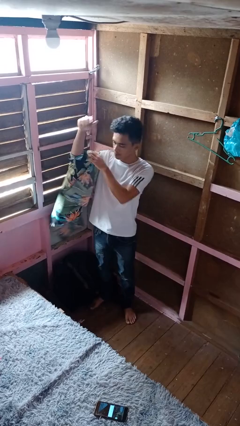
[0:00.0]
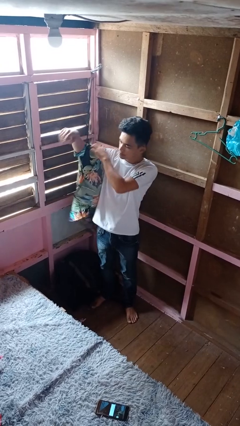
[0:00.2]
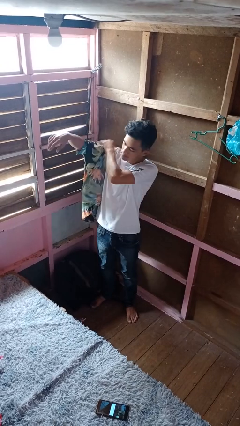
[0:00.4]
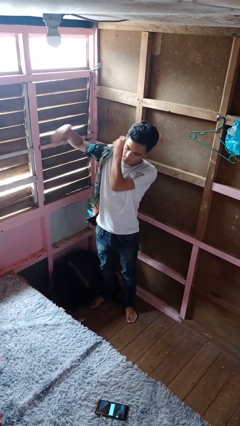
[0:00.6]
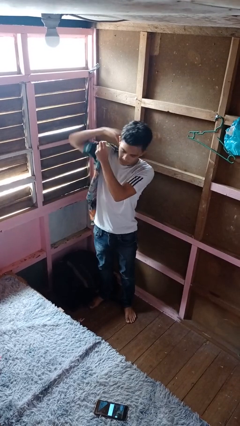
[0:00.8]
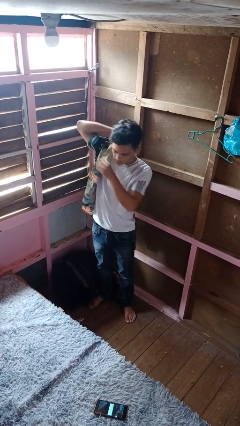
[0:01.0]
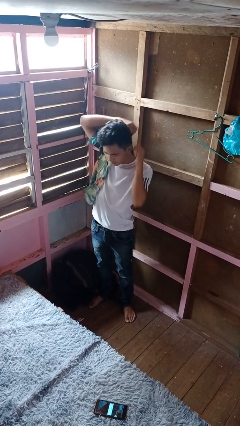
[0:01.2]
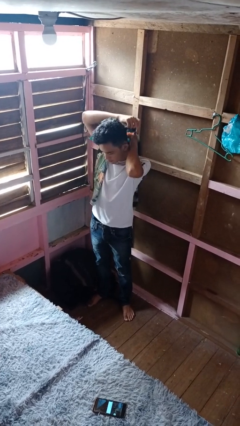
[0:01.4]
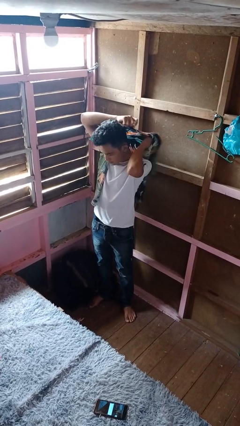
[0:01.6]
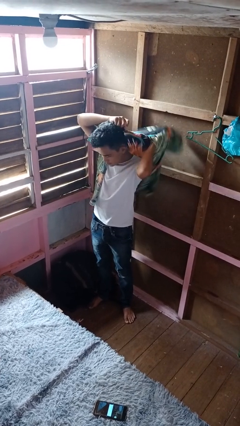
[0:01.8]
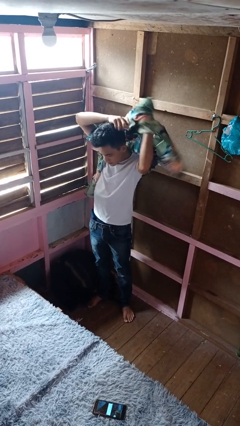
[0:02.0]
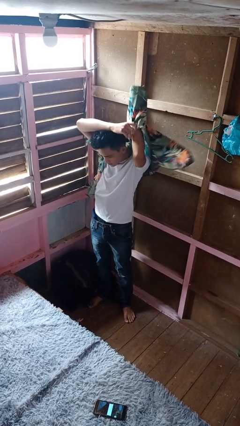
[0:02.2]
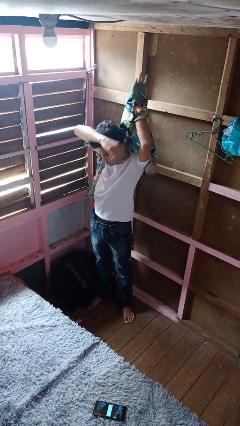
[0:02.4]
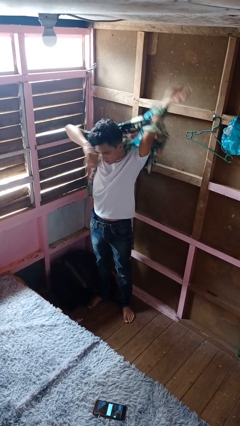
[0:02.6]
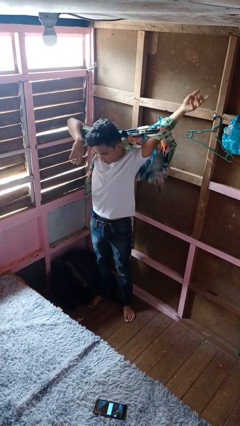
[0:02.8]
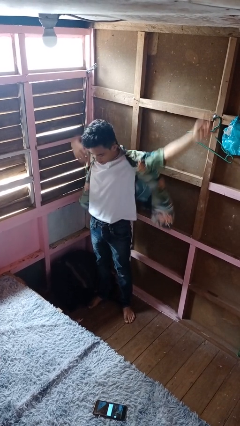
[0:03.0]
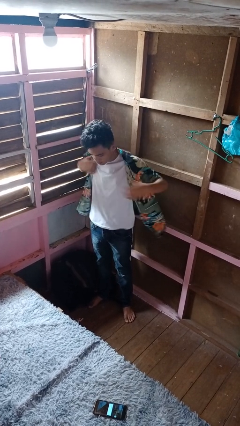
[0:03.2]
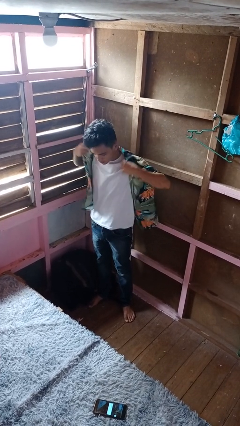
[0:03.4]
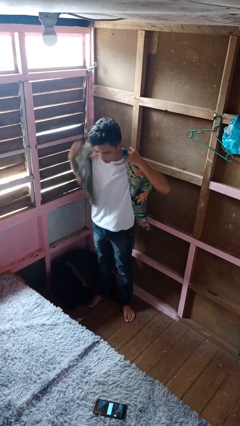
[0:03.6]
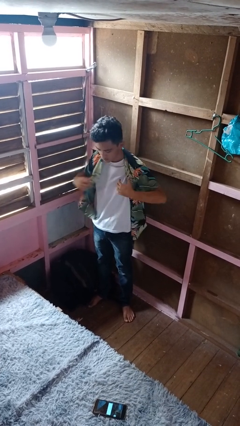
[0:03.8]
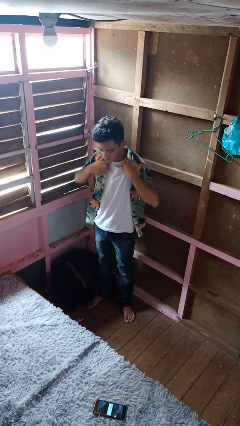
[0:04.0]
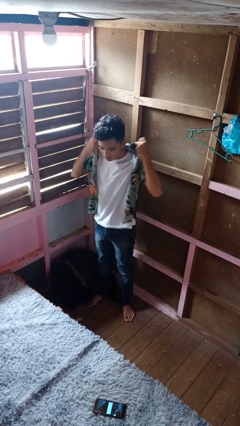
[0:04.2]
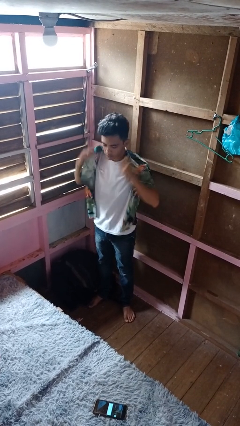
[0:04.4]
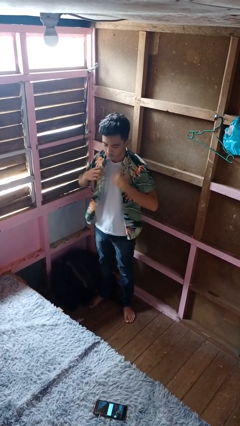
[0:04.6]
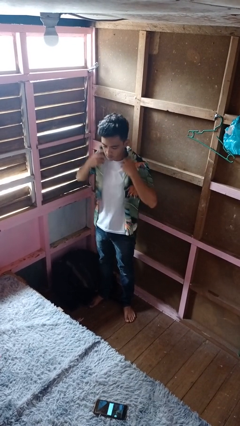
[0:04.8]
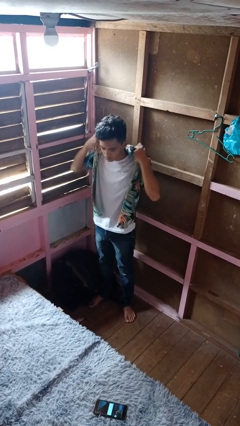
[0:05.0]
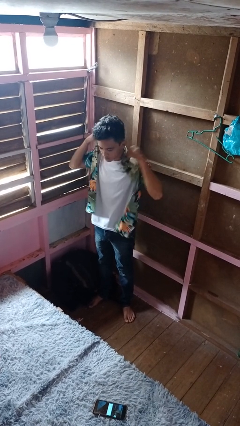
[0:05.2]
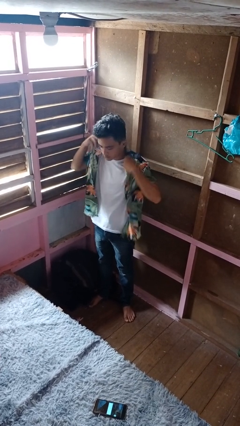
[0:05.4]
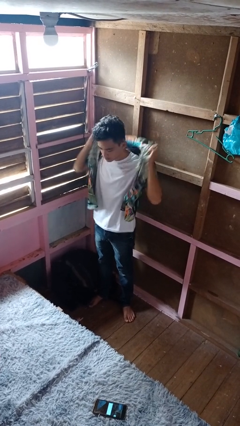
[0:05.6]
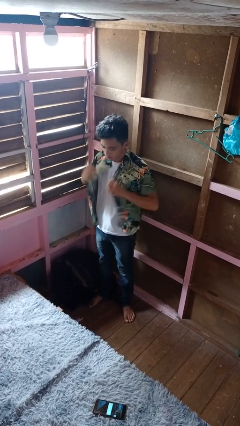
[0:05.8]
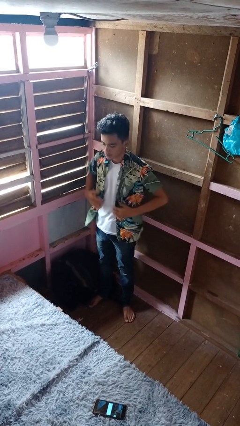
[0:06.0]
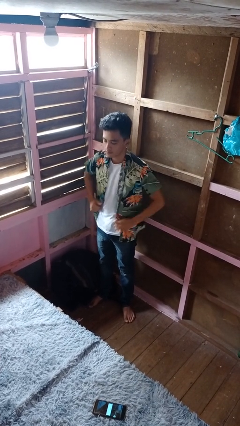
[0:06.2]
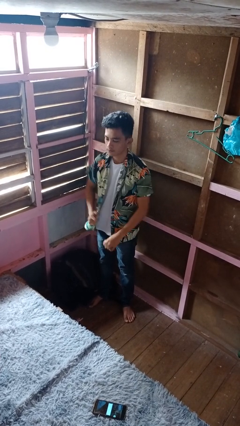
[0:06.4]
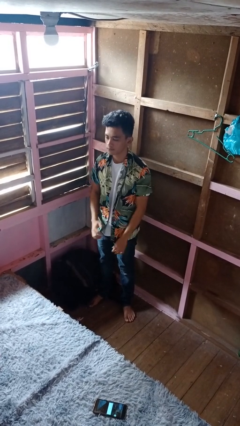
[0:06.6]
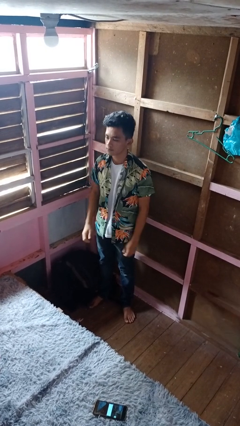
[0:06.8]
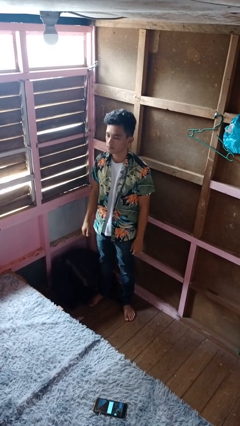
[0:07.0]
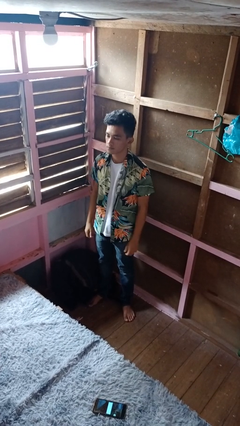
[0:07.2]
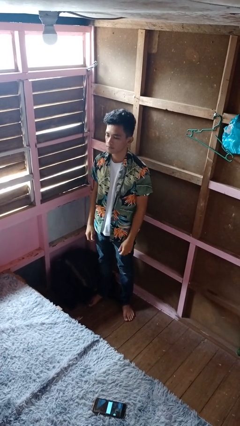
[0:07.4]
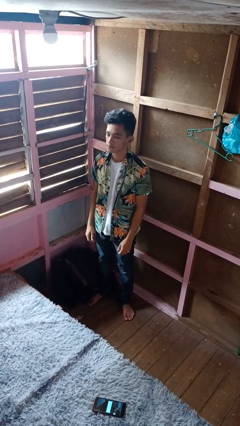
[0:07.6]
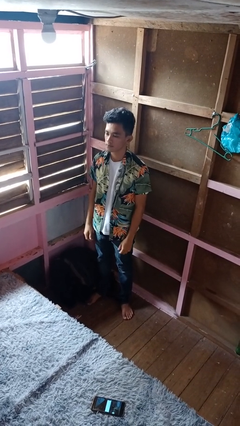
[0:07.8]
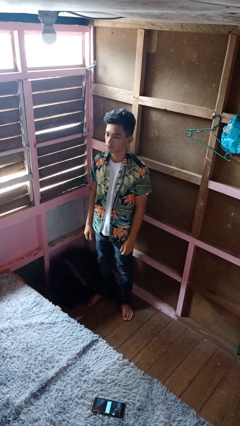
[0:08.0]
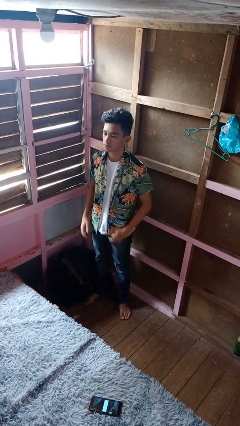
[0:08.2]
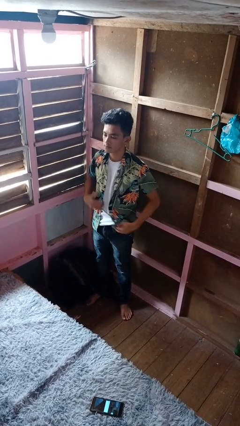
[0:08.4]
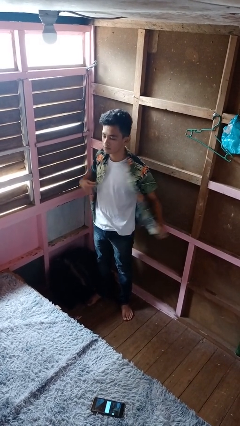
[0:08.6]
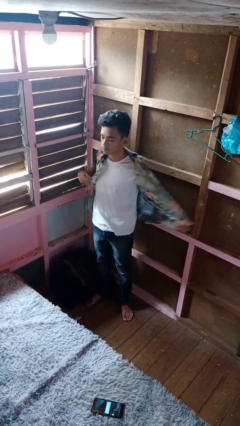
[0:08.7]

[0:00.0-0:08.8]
person puts on shirt

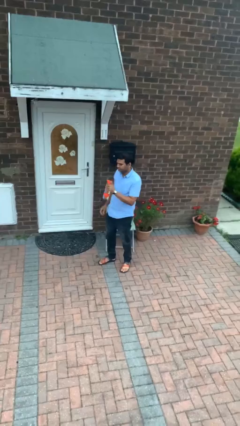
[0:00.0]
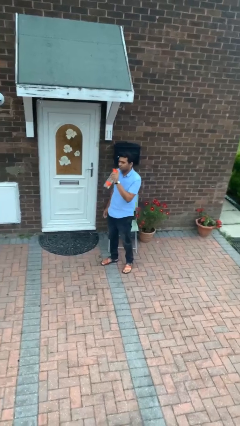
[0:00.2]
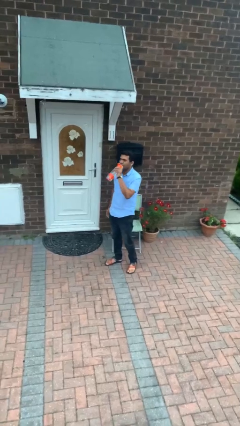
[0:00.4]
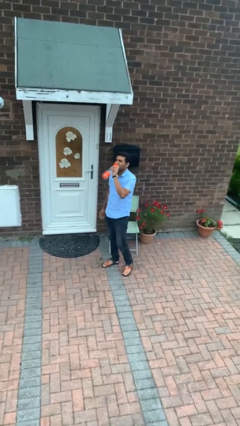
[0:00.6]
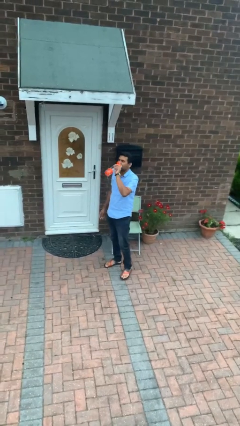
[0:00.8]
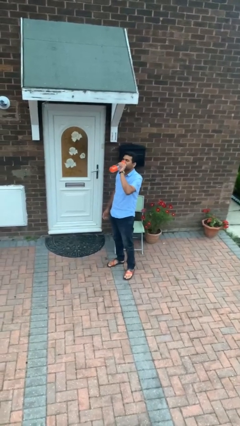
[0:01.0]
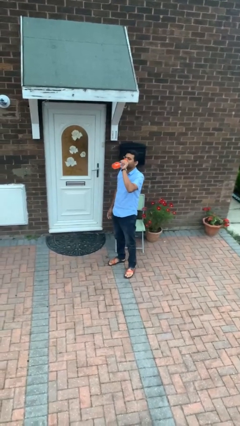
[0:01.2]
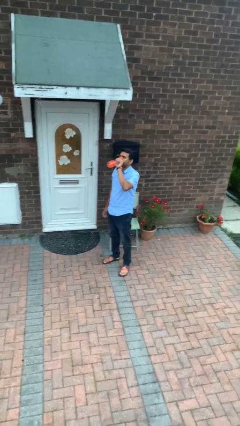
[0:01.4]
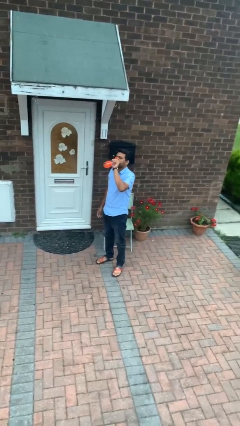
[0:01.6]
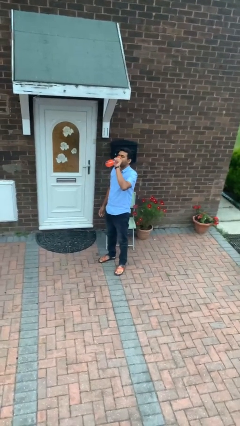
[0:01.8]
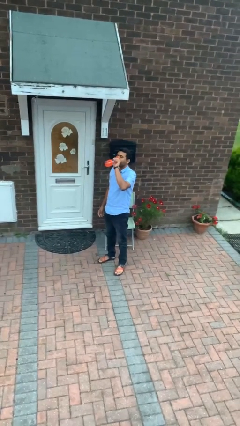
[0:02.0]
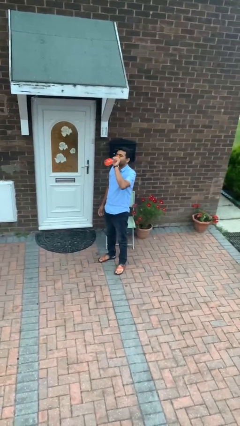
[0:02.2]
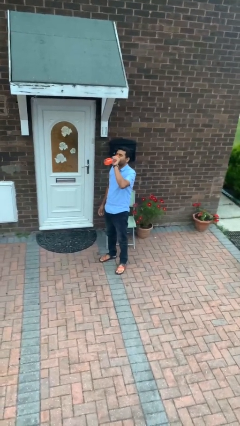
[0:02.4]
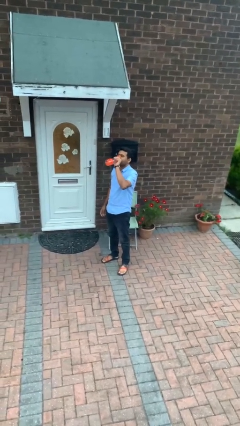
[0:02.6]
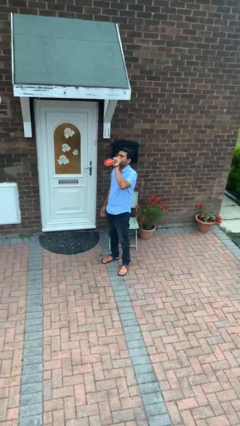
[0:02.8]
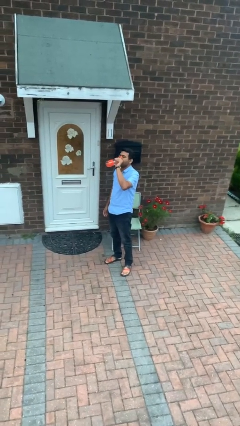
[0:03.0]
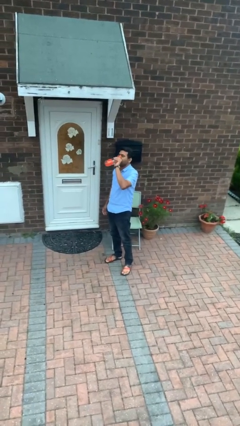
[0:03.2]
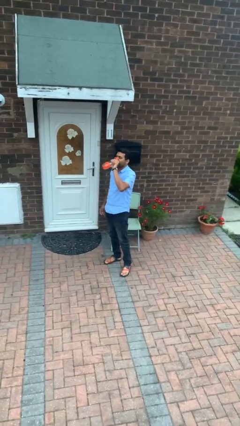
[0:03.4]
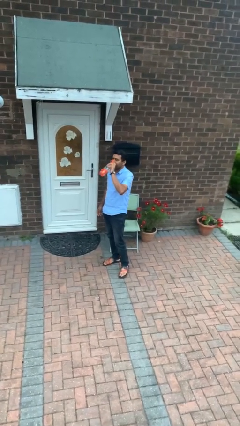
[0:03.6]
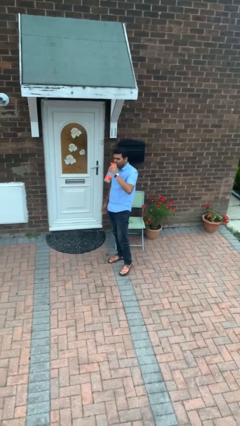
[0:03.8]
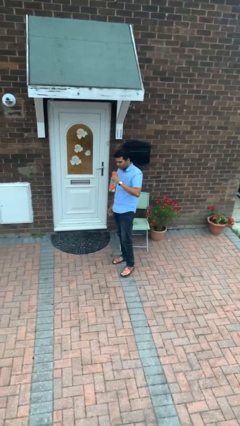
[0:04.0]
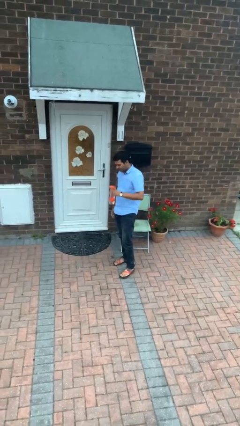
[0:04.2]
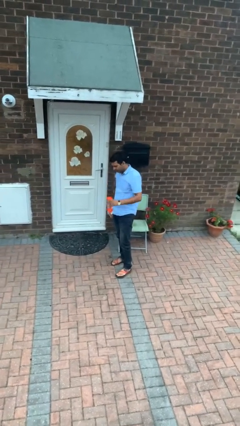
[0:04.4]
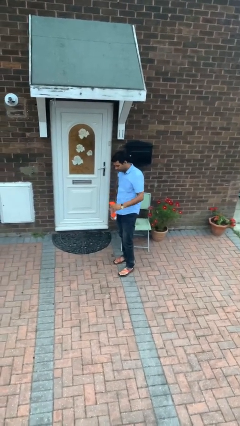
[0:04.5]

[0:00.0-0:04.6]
person drinks from bottle

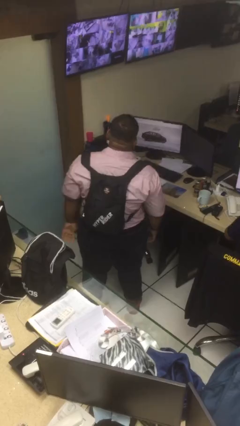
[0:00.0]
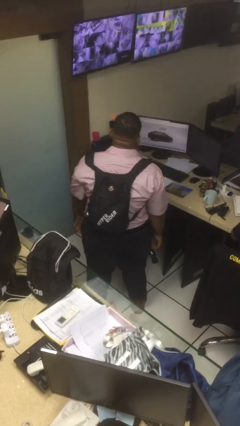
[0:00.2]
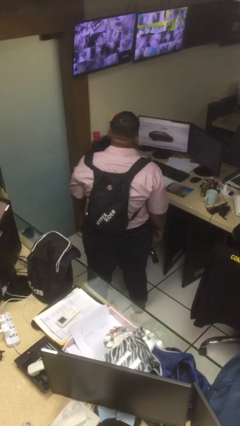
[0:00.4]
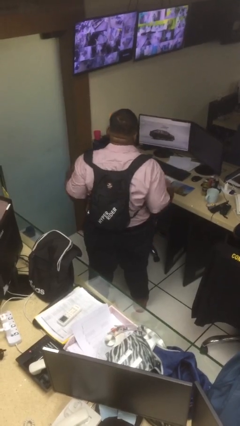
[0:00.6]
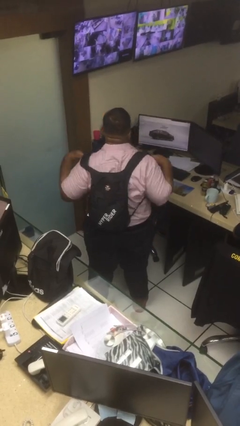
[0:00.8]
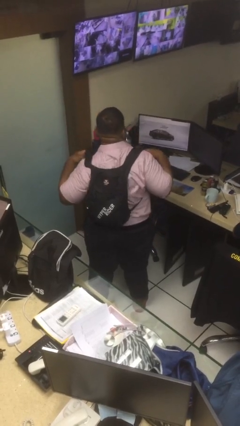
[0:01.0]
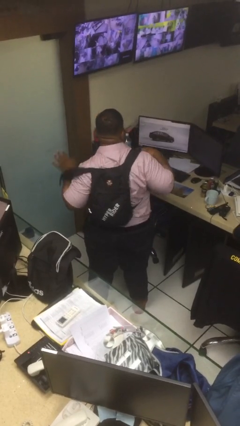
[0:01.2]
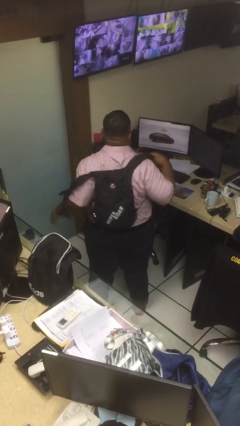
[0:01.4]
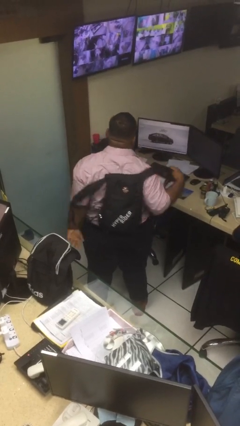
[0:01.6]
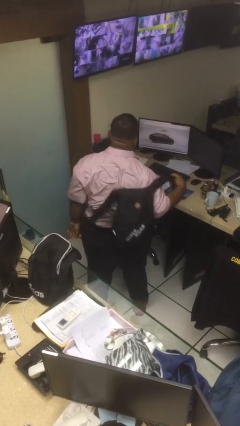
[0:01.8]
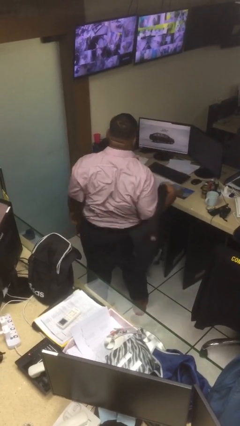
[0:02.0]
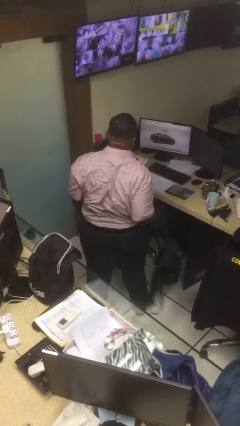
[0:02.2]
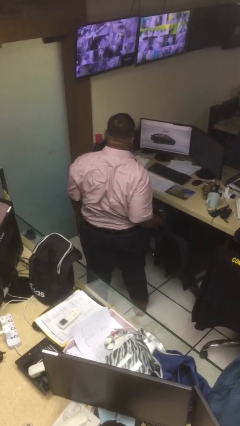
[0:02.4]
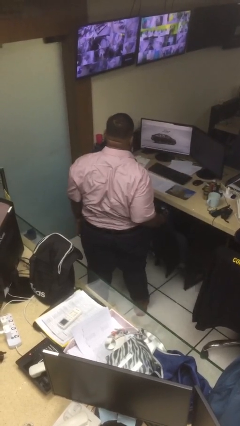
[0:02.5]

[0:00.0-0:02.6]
person takes off backpack

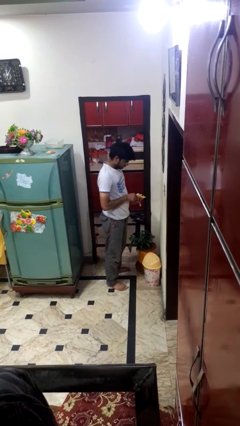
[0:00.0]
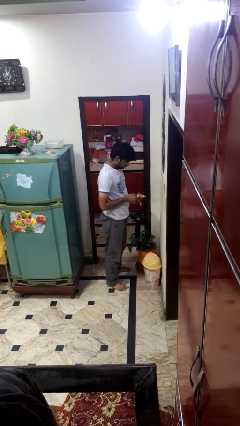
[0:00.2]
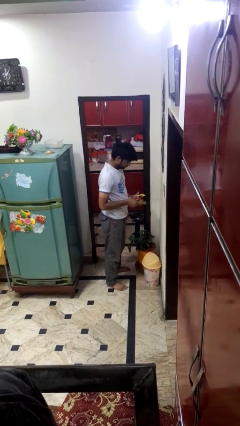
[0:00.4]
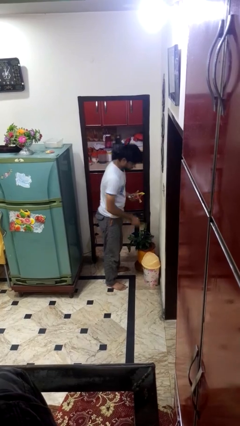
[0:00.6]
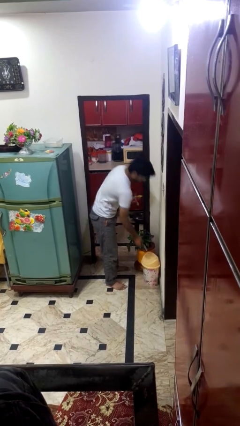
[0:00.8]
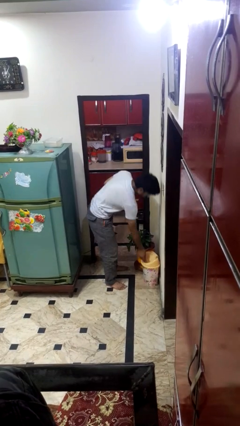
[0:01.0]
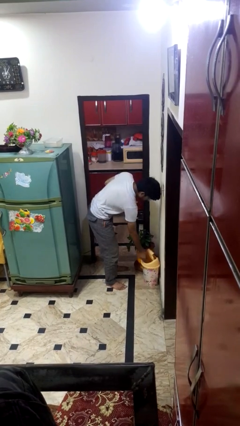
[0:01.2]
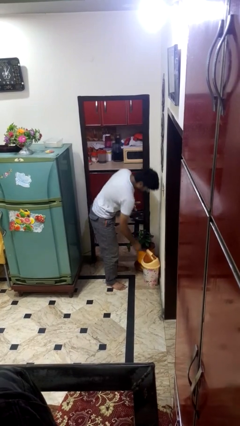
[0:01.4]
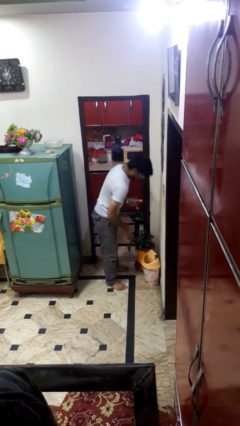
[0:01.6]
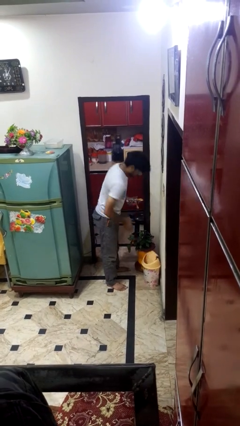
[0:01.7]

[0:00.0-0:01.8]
person discards trash

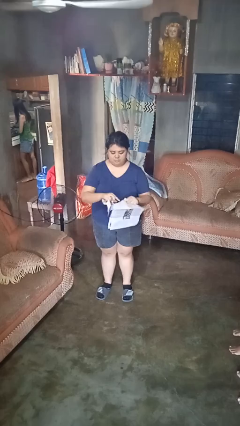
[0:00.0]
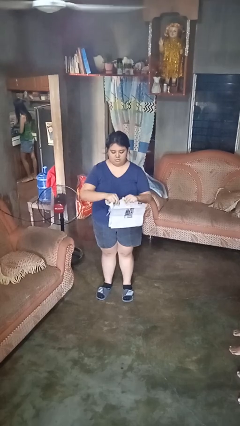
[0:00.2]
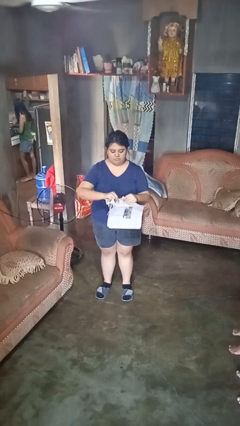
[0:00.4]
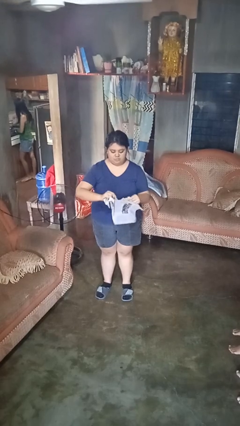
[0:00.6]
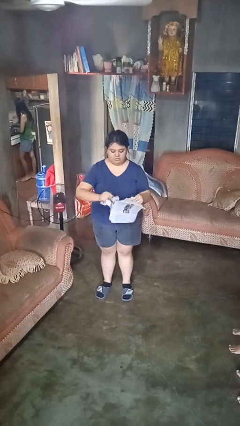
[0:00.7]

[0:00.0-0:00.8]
person tears paper
